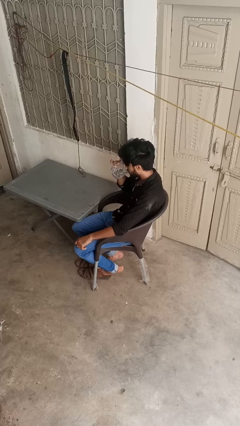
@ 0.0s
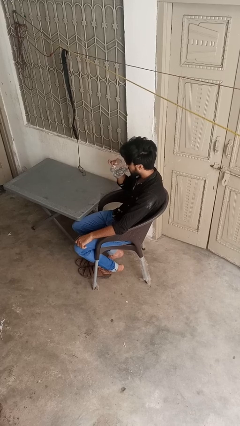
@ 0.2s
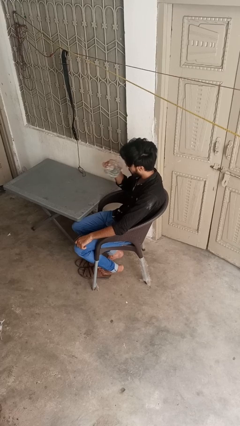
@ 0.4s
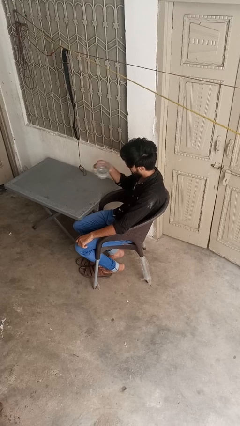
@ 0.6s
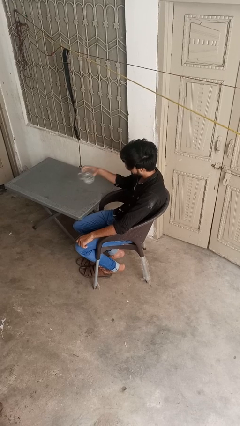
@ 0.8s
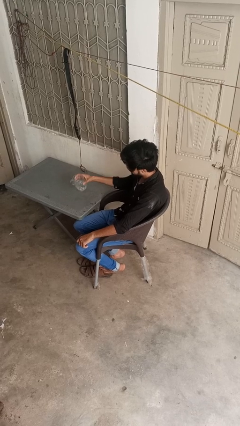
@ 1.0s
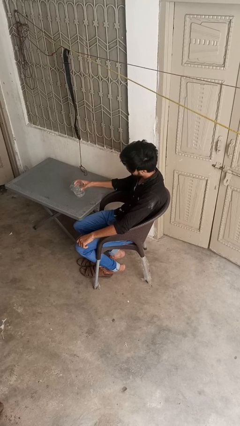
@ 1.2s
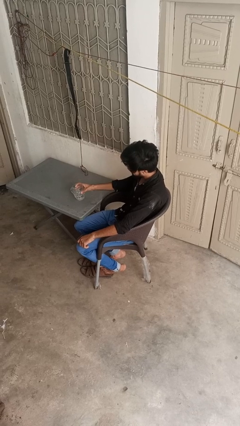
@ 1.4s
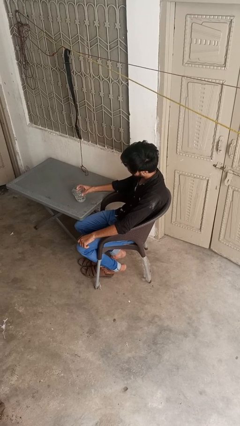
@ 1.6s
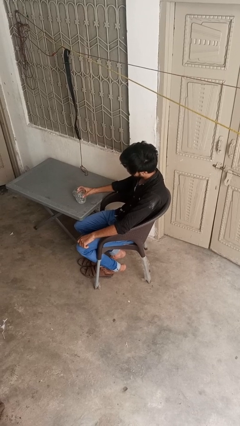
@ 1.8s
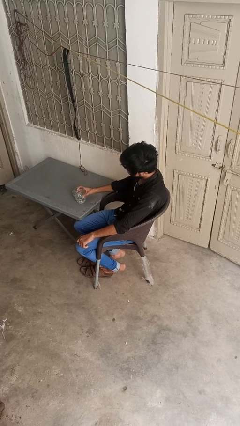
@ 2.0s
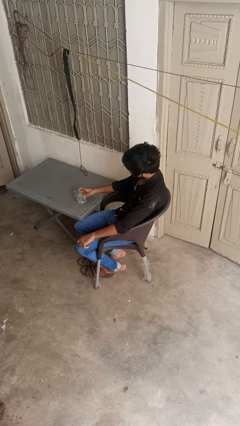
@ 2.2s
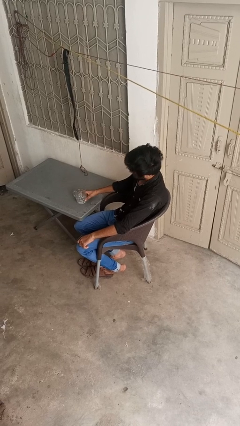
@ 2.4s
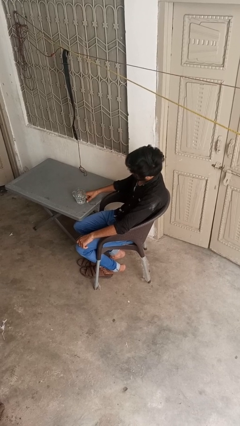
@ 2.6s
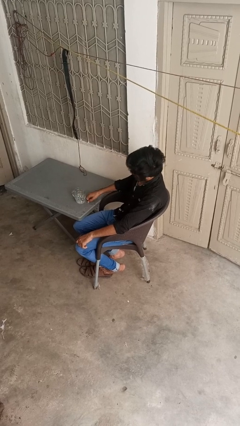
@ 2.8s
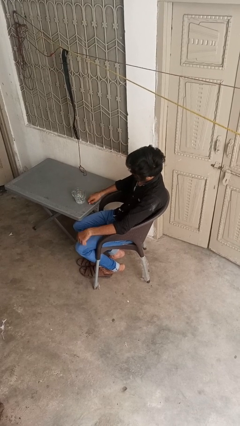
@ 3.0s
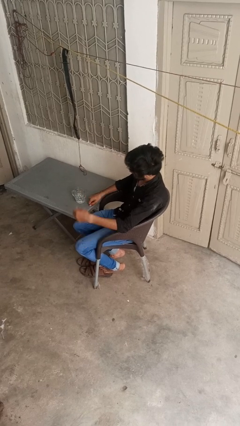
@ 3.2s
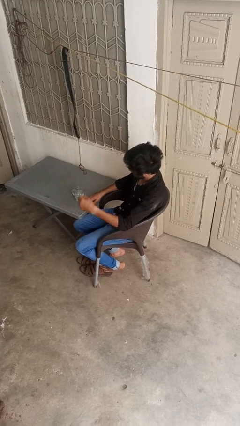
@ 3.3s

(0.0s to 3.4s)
person puts down object on table

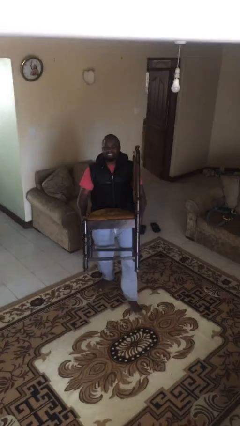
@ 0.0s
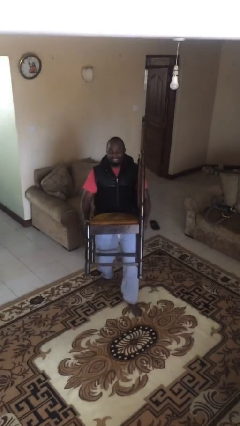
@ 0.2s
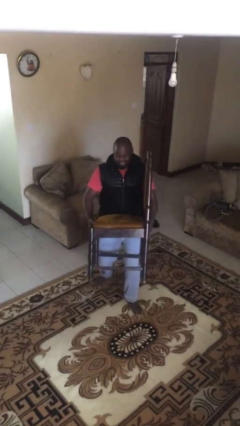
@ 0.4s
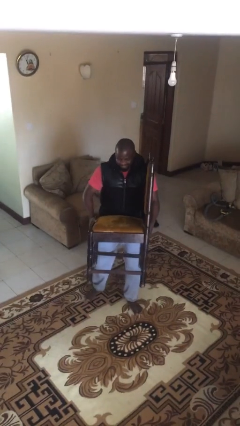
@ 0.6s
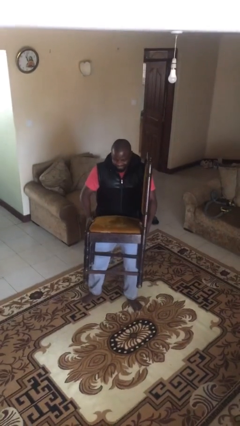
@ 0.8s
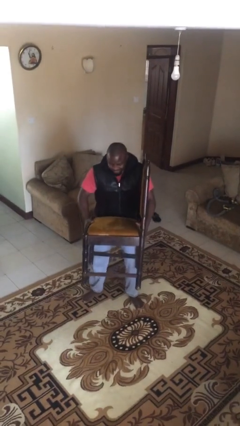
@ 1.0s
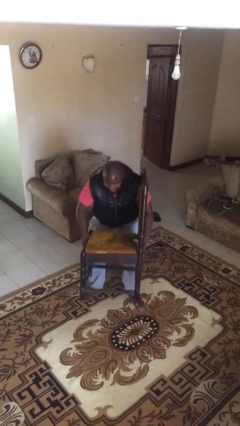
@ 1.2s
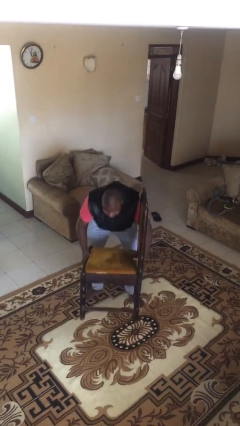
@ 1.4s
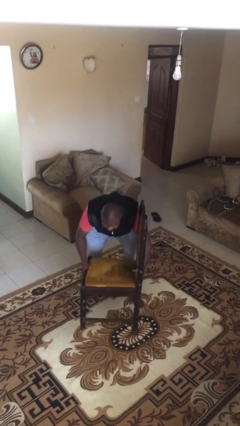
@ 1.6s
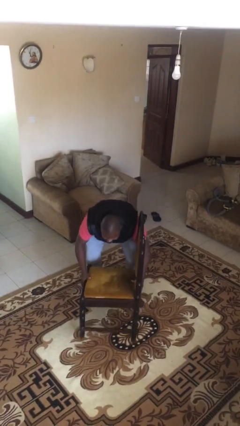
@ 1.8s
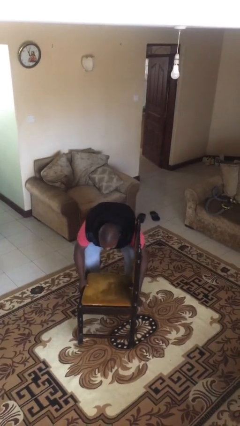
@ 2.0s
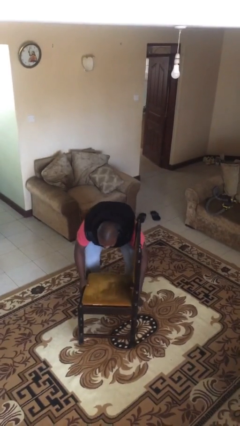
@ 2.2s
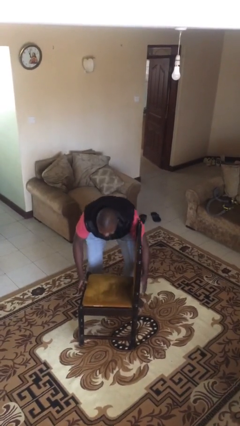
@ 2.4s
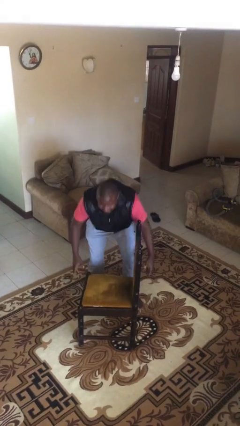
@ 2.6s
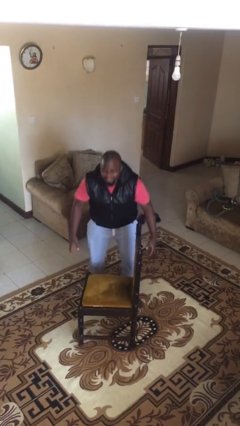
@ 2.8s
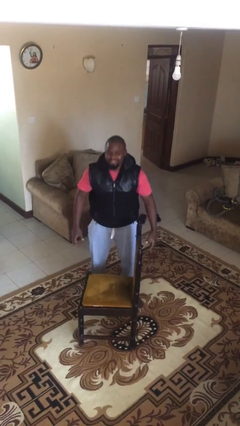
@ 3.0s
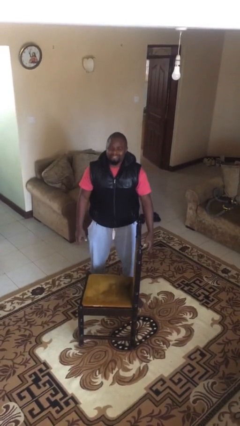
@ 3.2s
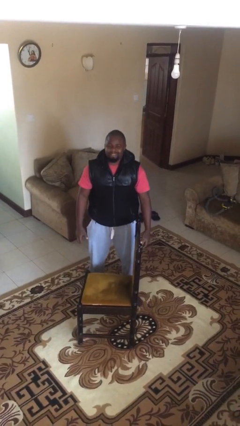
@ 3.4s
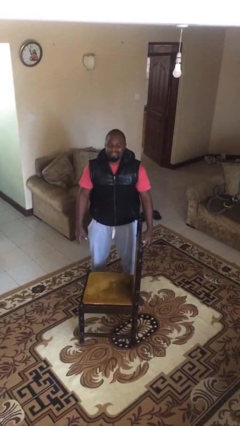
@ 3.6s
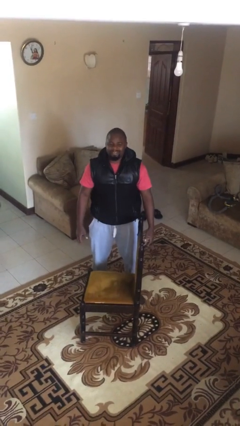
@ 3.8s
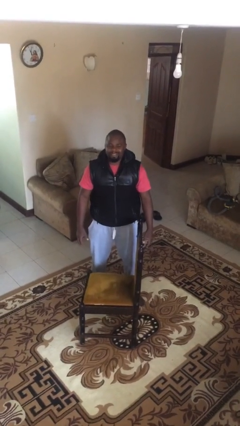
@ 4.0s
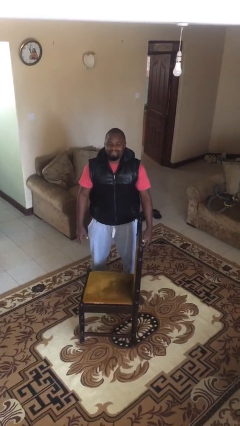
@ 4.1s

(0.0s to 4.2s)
person puts down object on floor

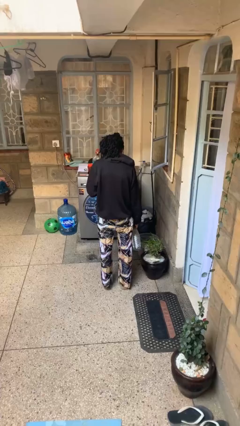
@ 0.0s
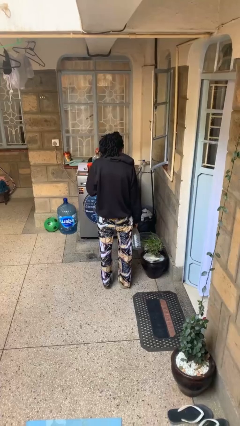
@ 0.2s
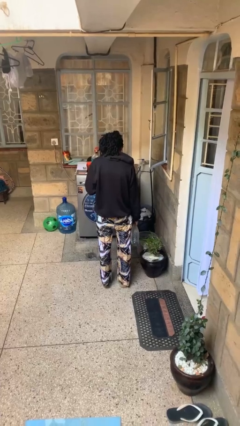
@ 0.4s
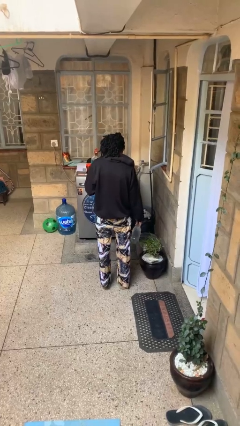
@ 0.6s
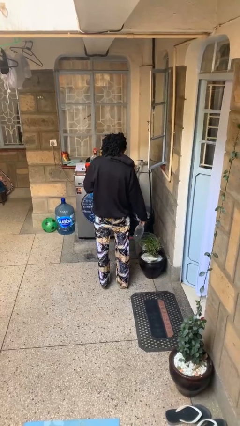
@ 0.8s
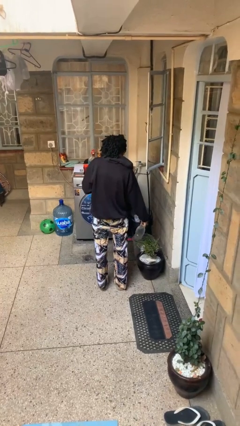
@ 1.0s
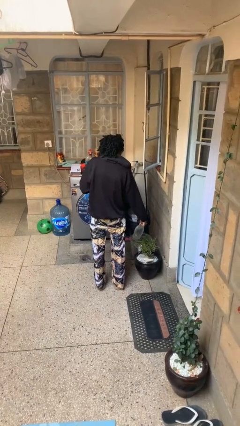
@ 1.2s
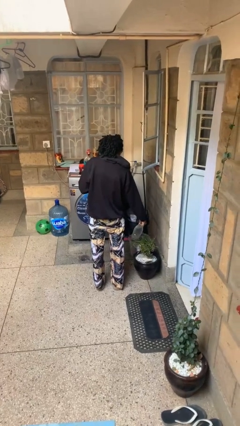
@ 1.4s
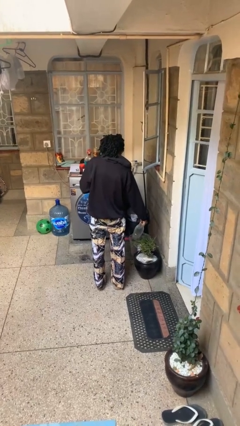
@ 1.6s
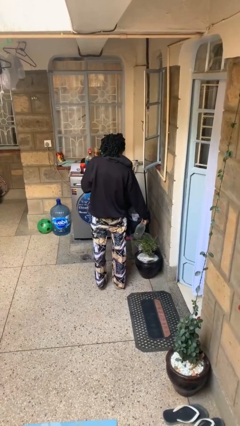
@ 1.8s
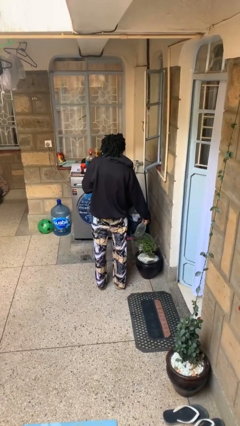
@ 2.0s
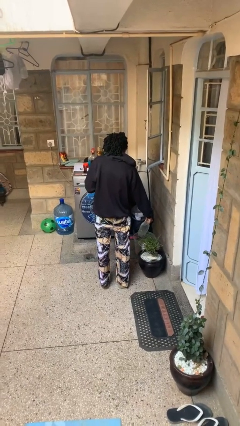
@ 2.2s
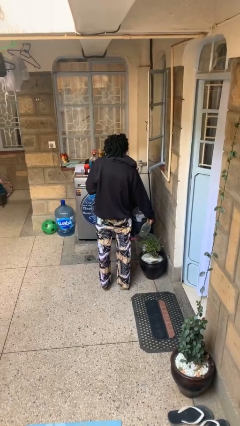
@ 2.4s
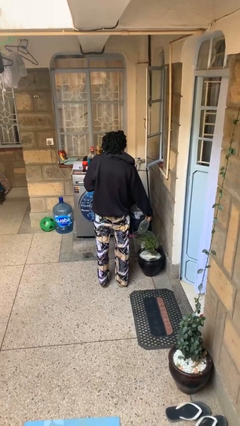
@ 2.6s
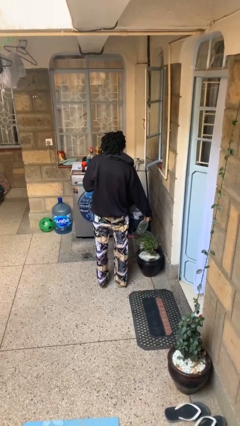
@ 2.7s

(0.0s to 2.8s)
person waters houseplant

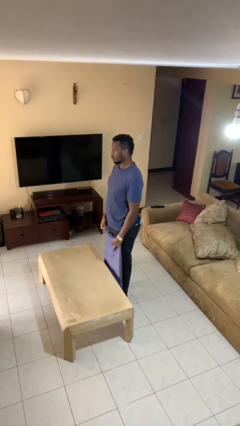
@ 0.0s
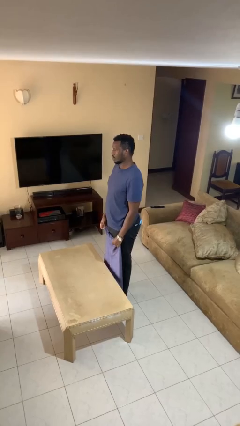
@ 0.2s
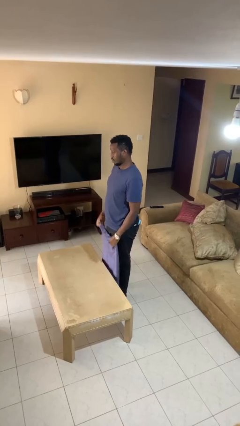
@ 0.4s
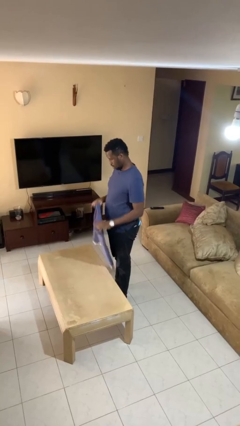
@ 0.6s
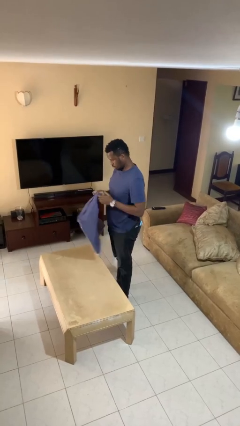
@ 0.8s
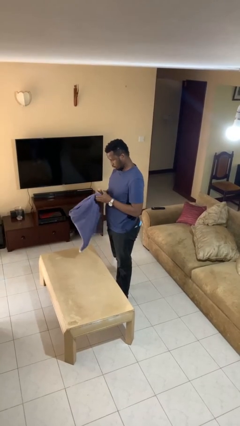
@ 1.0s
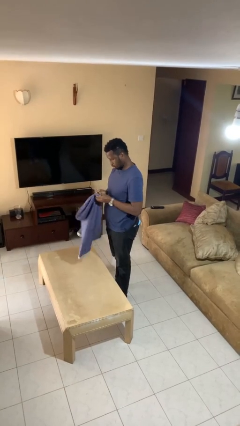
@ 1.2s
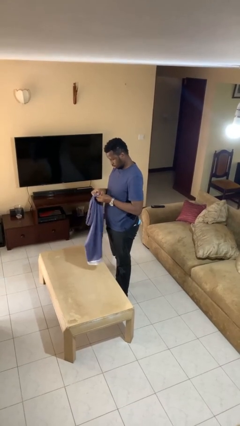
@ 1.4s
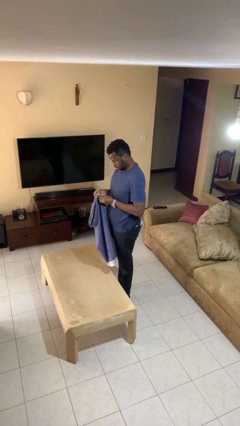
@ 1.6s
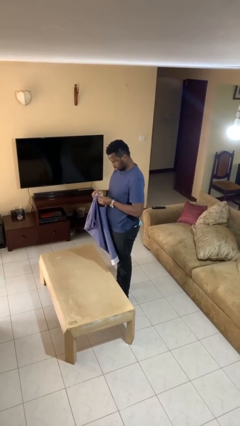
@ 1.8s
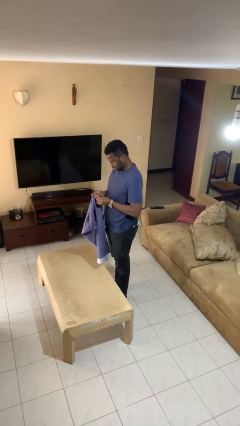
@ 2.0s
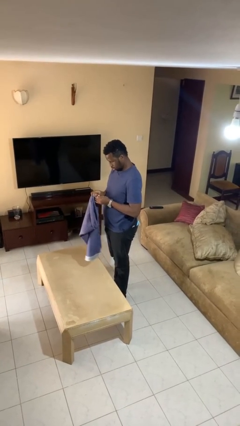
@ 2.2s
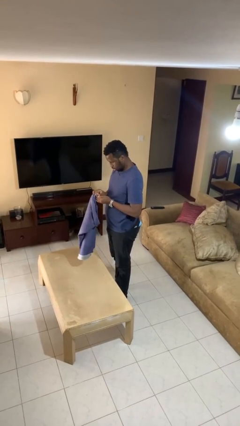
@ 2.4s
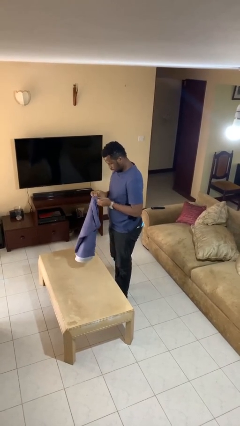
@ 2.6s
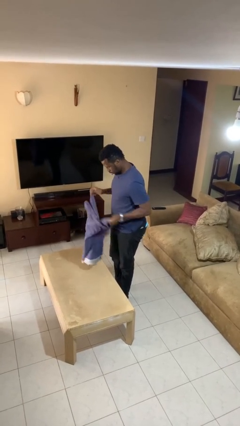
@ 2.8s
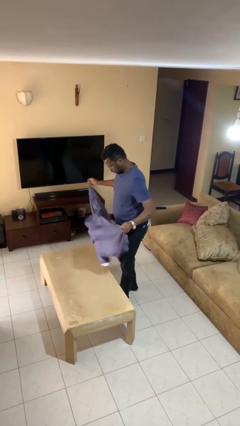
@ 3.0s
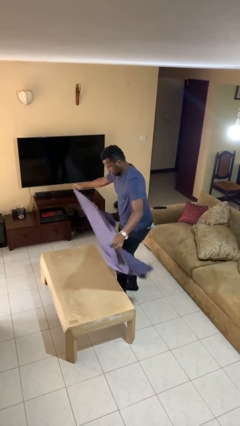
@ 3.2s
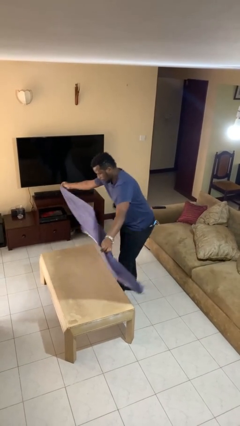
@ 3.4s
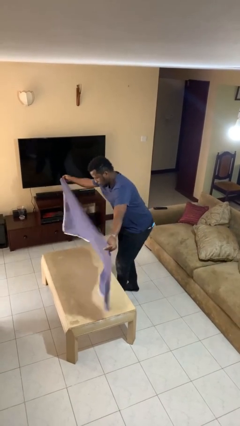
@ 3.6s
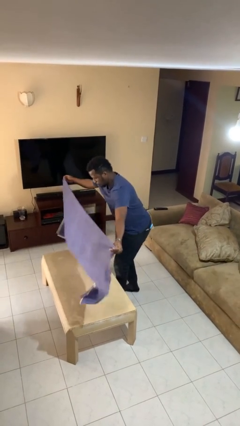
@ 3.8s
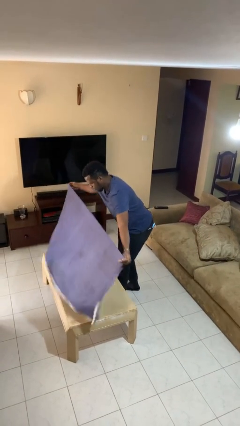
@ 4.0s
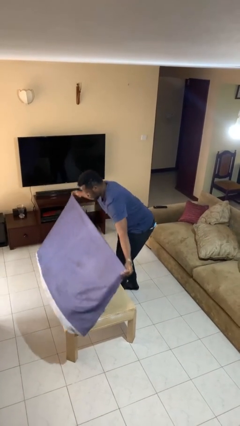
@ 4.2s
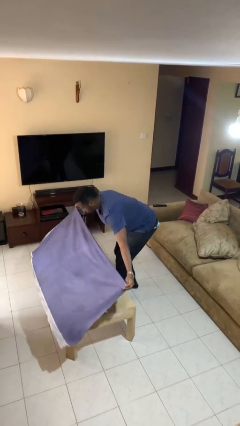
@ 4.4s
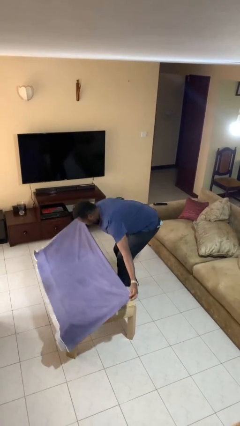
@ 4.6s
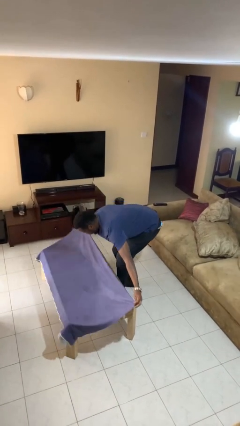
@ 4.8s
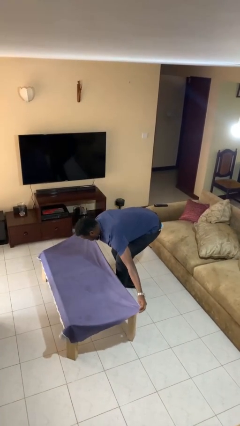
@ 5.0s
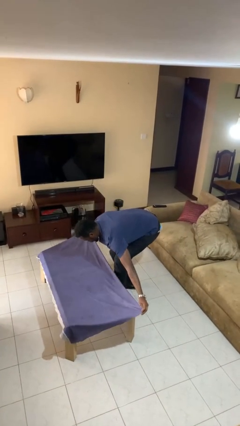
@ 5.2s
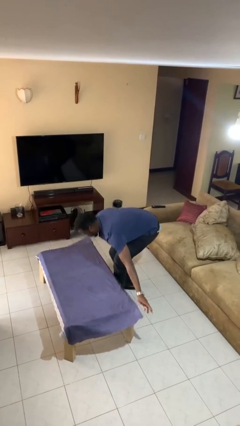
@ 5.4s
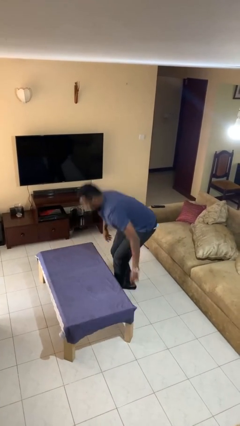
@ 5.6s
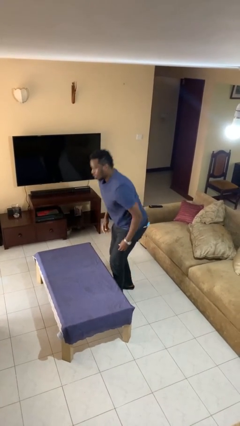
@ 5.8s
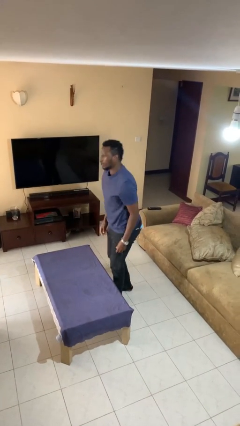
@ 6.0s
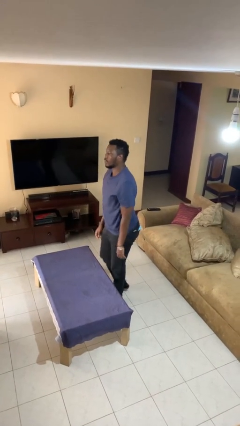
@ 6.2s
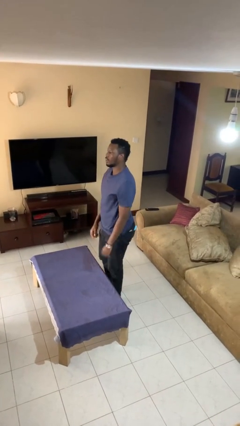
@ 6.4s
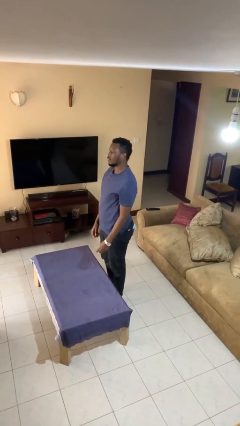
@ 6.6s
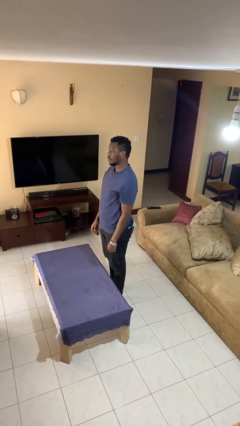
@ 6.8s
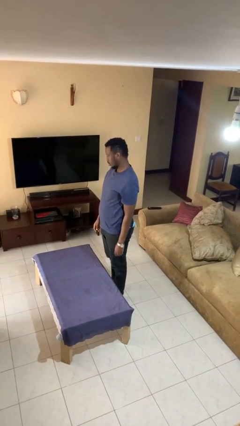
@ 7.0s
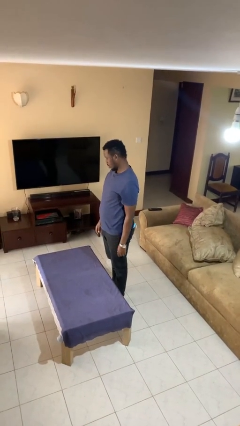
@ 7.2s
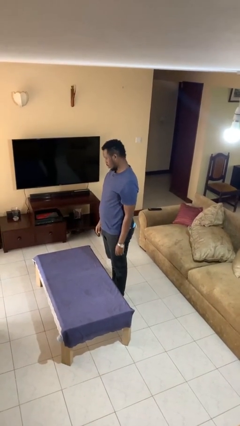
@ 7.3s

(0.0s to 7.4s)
person spreads tablecloth
